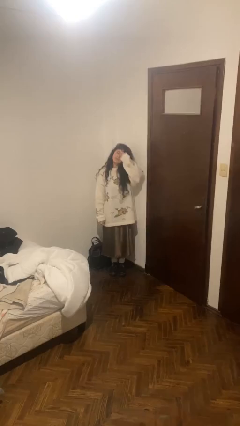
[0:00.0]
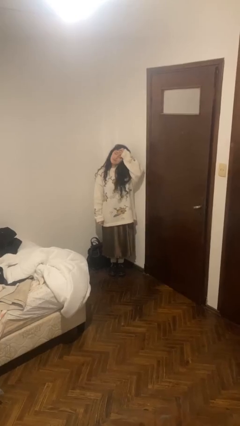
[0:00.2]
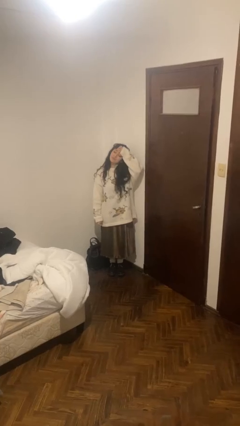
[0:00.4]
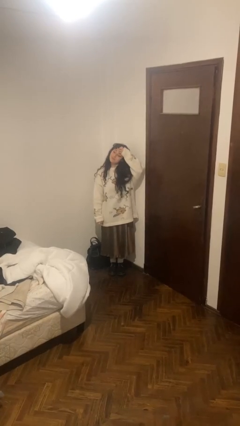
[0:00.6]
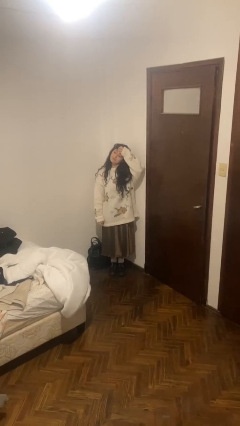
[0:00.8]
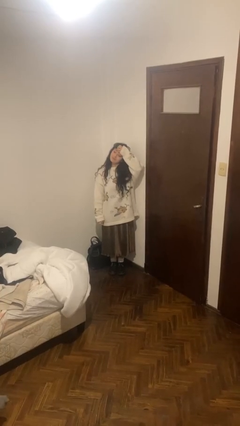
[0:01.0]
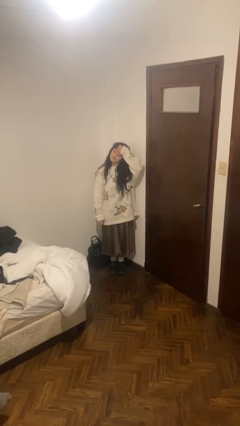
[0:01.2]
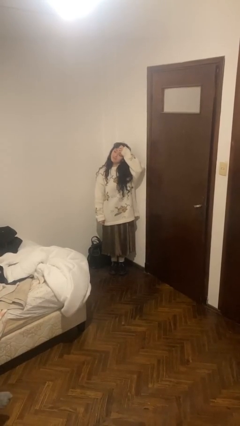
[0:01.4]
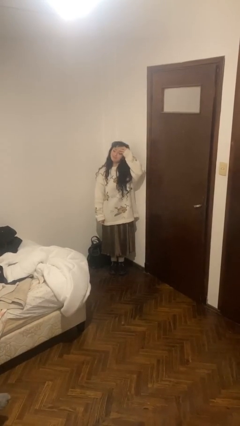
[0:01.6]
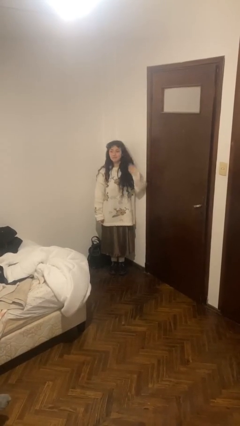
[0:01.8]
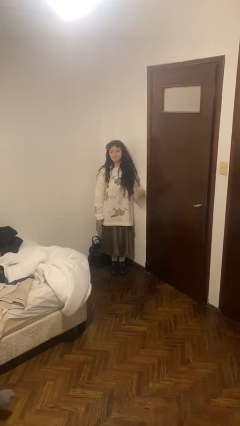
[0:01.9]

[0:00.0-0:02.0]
person scratches face

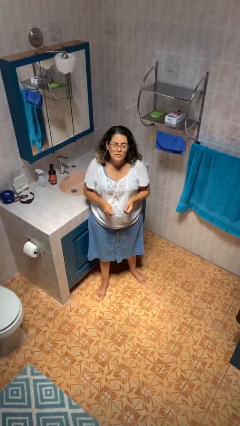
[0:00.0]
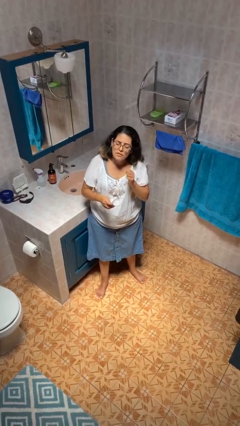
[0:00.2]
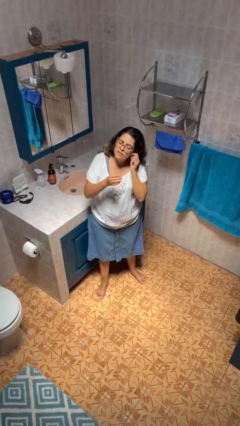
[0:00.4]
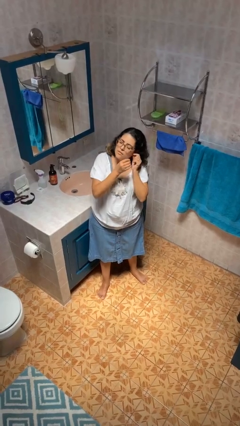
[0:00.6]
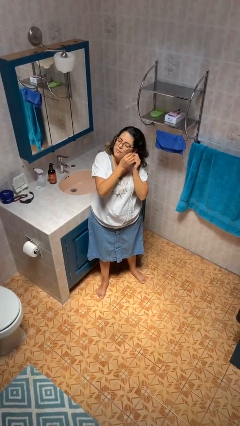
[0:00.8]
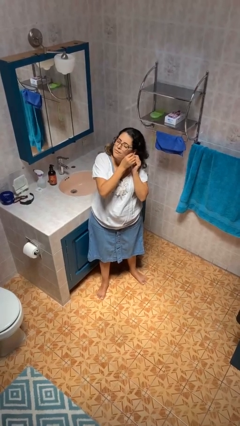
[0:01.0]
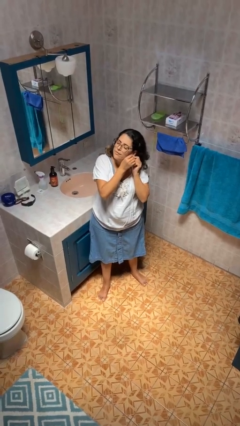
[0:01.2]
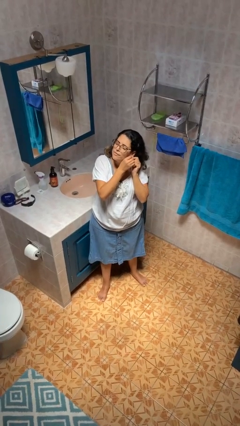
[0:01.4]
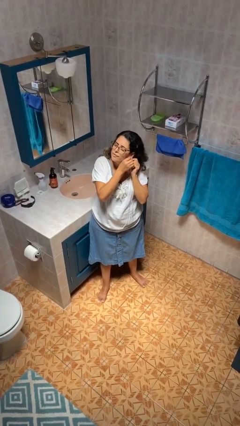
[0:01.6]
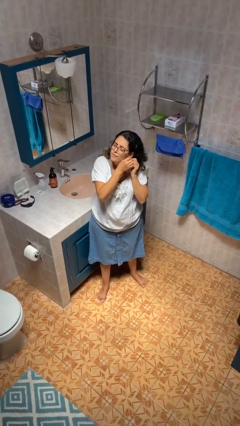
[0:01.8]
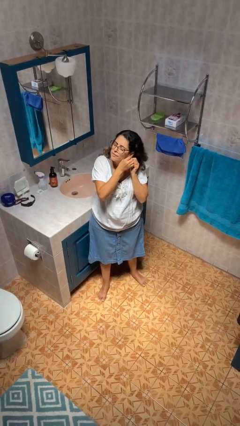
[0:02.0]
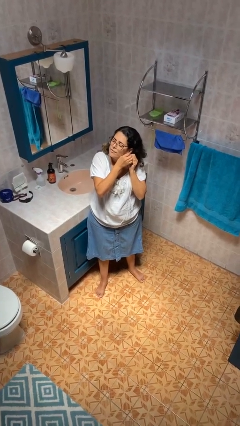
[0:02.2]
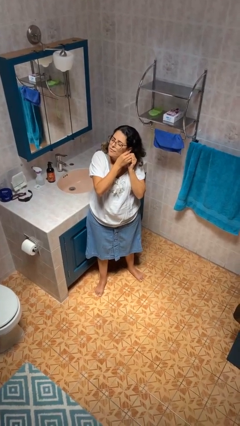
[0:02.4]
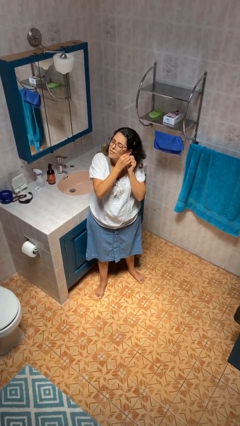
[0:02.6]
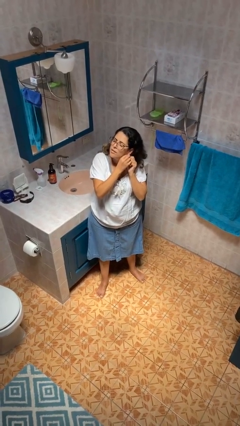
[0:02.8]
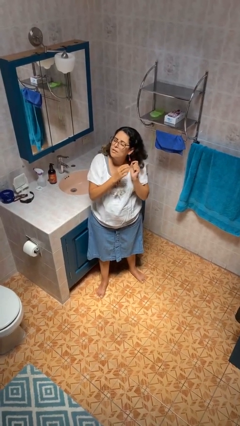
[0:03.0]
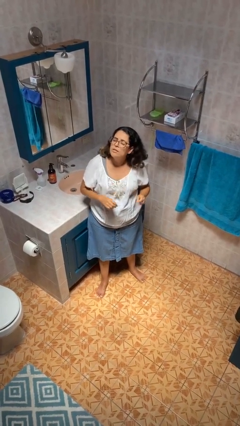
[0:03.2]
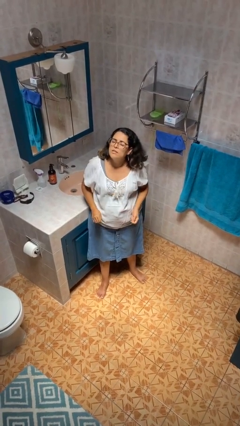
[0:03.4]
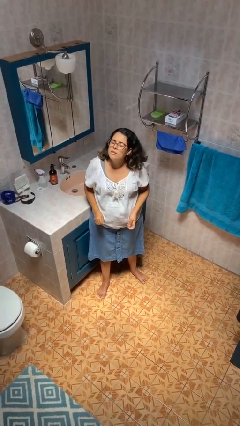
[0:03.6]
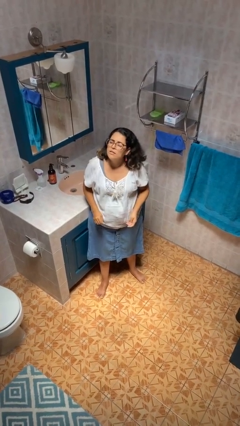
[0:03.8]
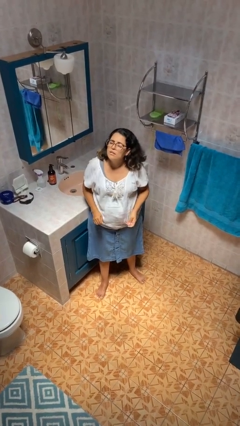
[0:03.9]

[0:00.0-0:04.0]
person puts on earrings

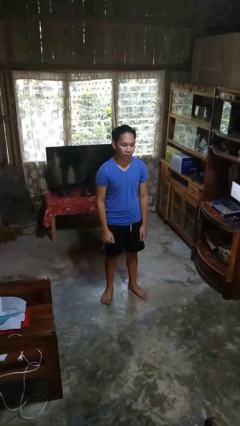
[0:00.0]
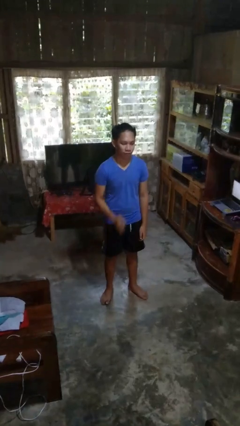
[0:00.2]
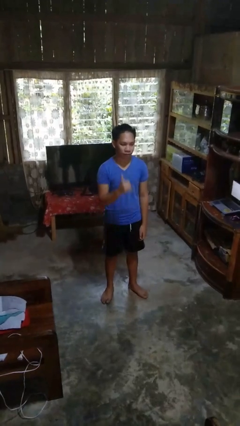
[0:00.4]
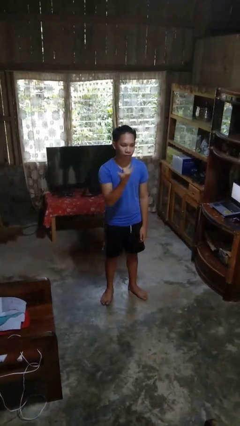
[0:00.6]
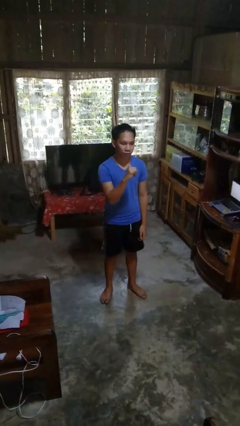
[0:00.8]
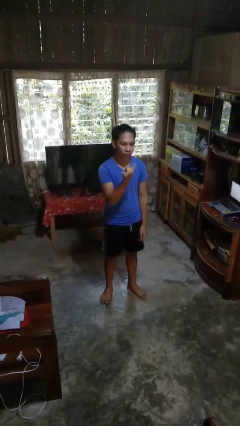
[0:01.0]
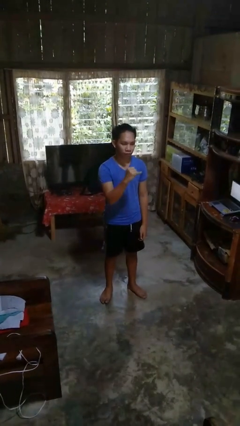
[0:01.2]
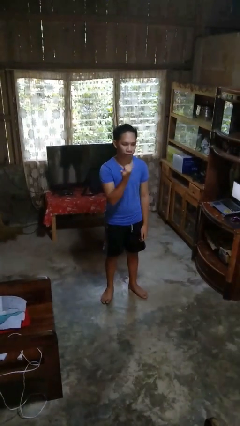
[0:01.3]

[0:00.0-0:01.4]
person gestures hang loose

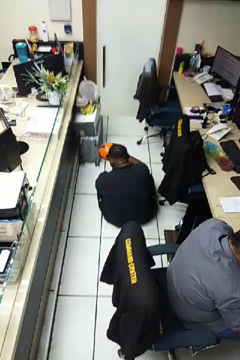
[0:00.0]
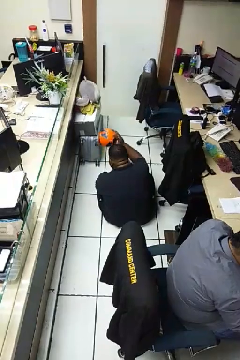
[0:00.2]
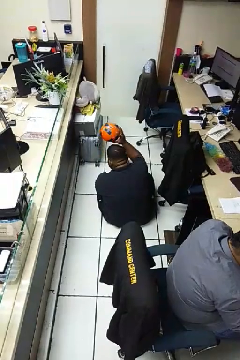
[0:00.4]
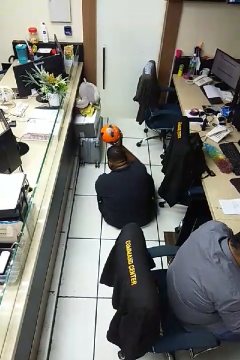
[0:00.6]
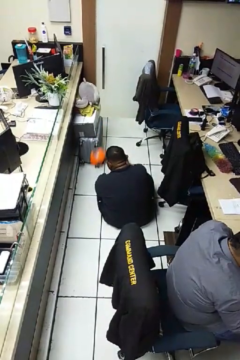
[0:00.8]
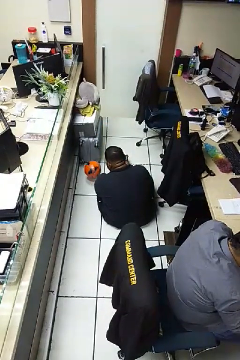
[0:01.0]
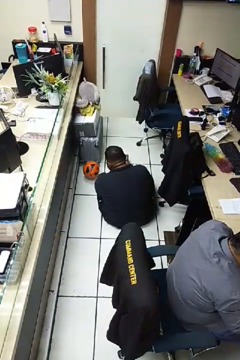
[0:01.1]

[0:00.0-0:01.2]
person bounces ball on floor

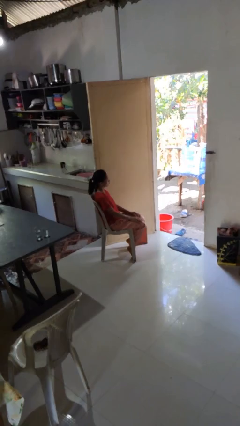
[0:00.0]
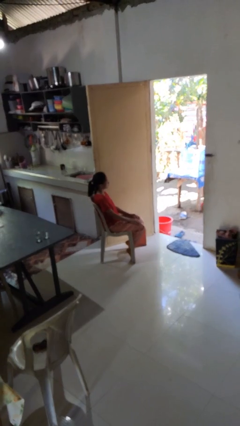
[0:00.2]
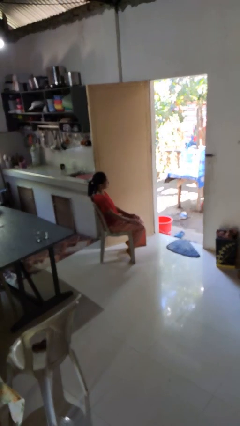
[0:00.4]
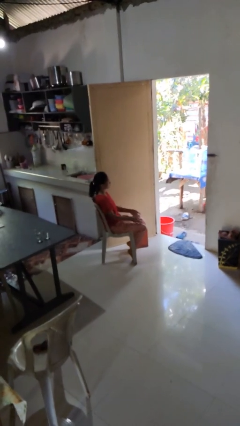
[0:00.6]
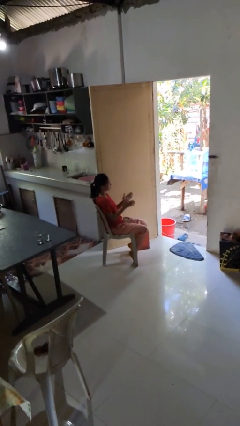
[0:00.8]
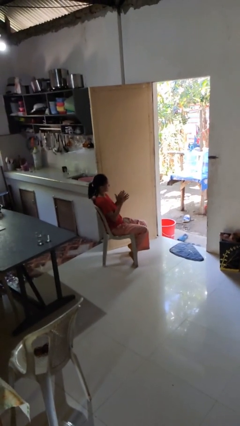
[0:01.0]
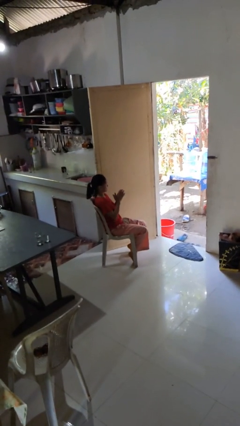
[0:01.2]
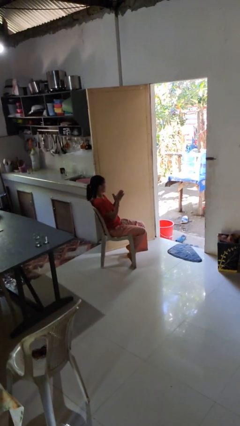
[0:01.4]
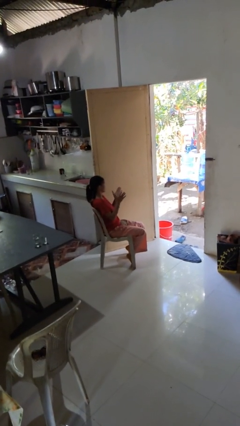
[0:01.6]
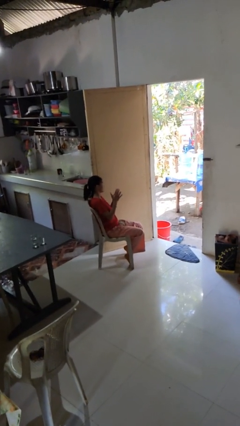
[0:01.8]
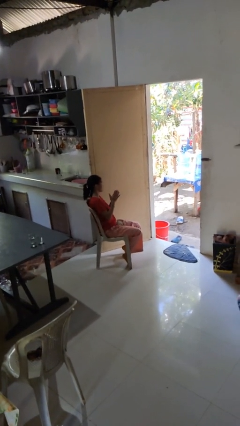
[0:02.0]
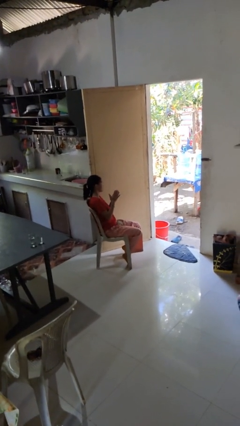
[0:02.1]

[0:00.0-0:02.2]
person claps hands

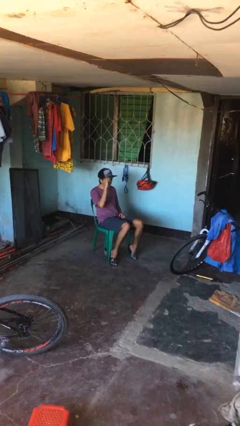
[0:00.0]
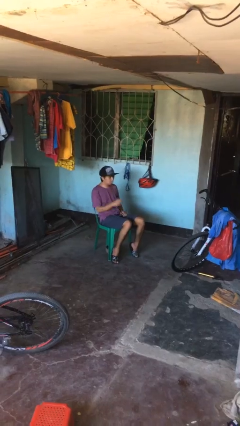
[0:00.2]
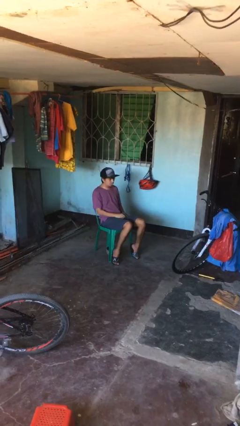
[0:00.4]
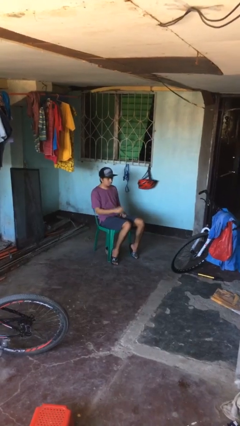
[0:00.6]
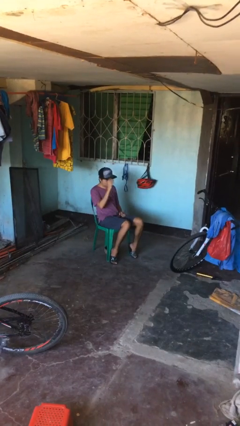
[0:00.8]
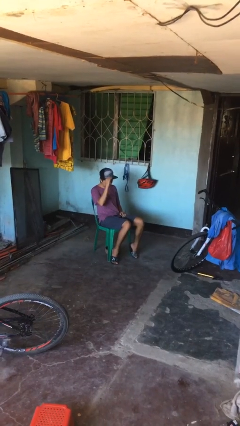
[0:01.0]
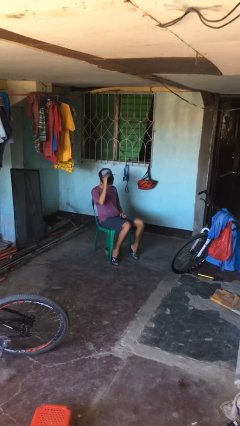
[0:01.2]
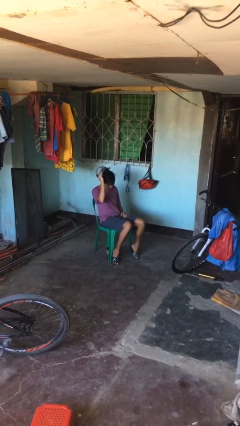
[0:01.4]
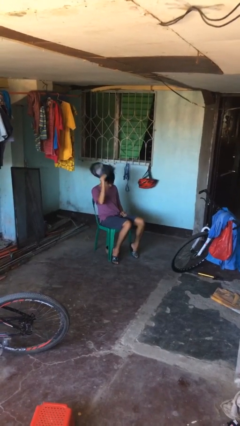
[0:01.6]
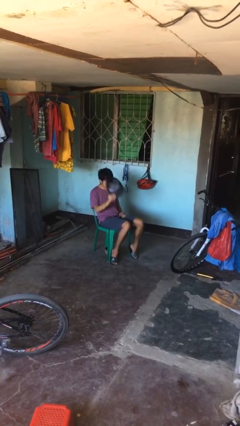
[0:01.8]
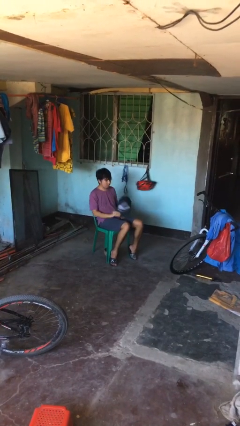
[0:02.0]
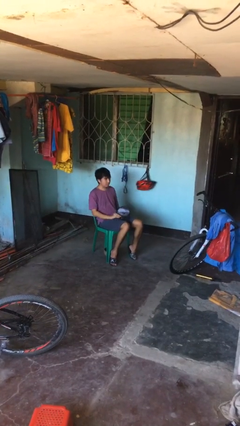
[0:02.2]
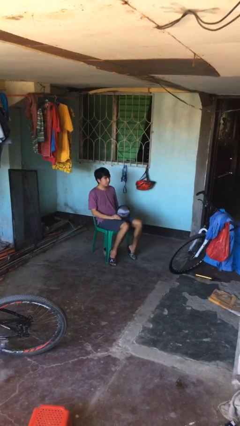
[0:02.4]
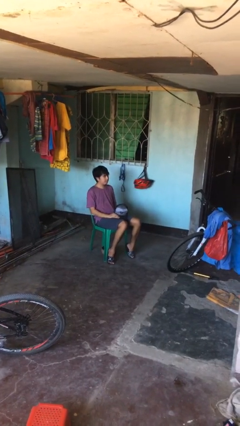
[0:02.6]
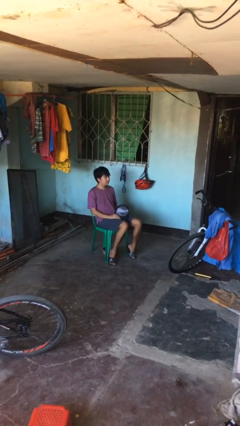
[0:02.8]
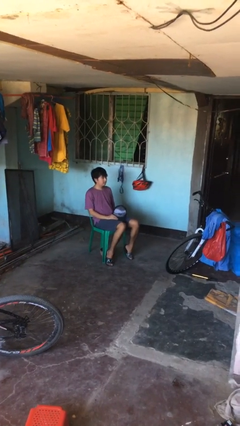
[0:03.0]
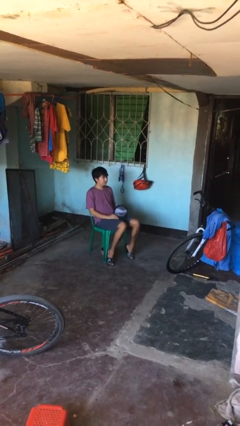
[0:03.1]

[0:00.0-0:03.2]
person takes off hat

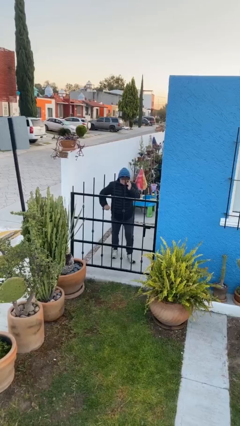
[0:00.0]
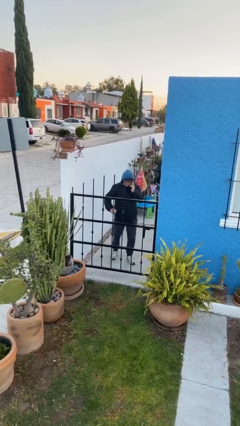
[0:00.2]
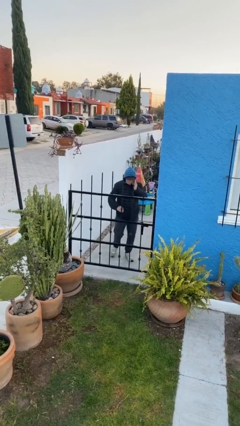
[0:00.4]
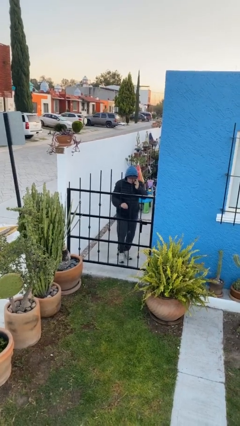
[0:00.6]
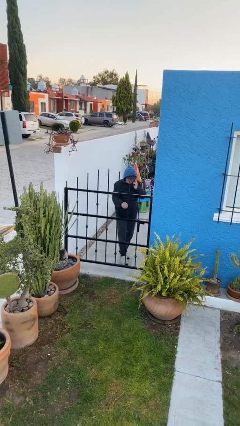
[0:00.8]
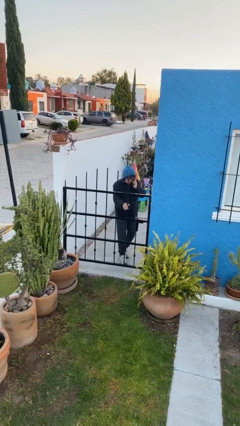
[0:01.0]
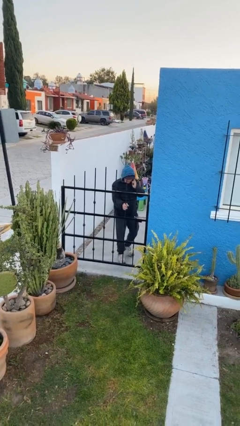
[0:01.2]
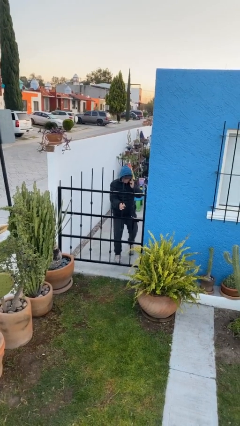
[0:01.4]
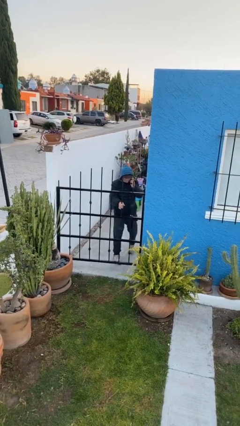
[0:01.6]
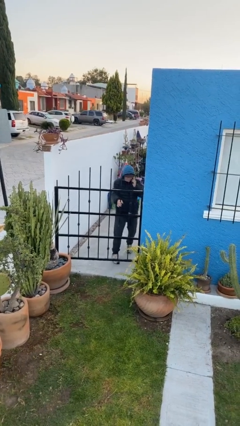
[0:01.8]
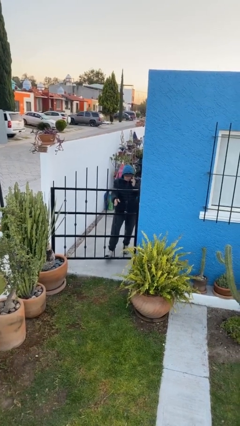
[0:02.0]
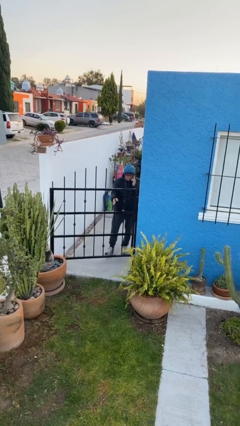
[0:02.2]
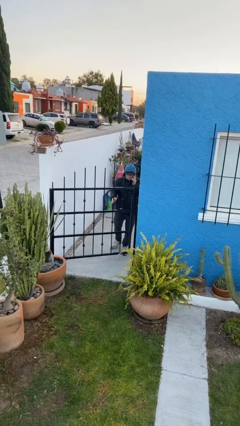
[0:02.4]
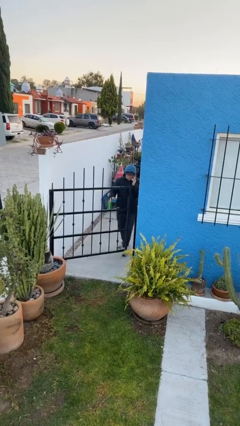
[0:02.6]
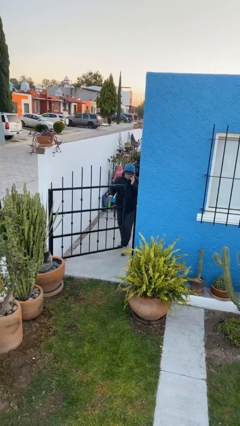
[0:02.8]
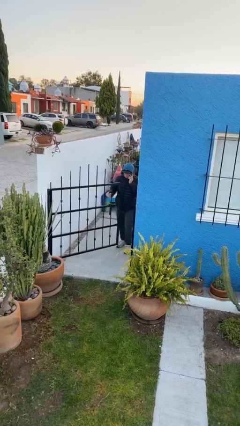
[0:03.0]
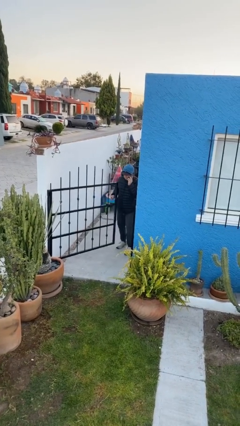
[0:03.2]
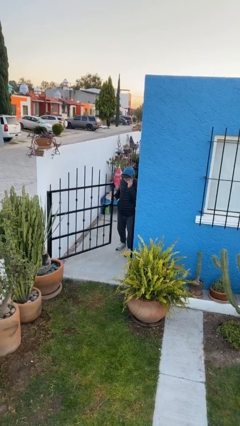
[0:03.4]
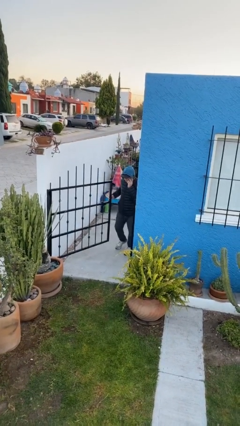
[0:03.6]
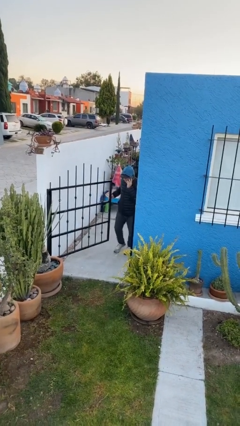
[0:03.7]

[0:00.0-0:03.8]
person opens facility door
